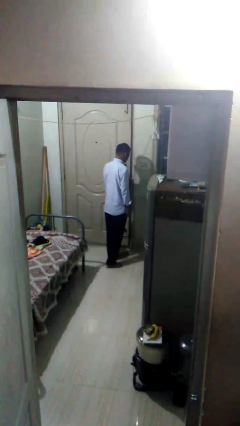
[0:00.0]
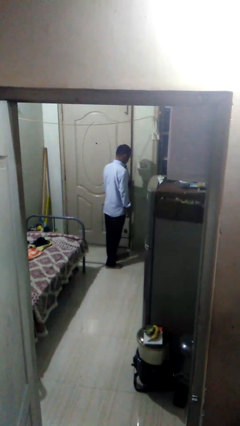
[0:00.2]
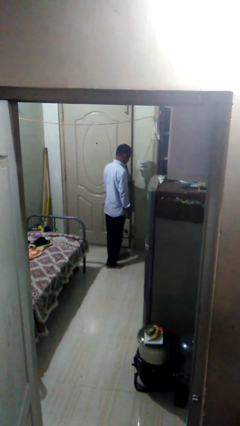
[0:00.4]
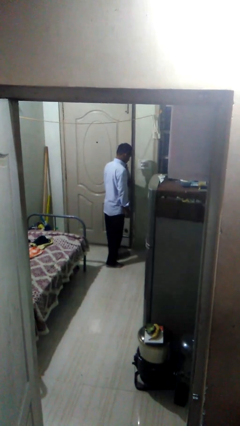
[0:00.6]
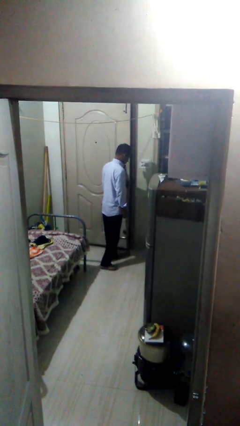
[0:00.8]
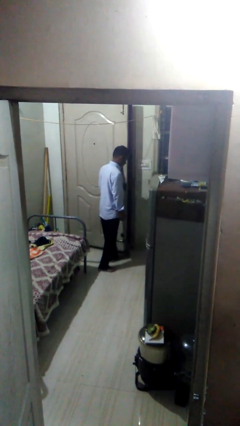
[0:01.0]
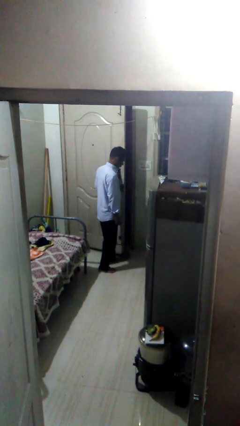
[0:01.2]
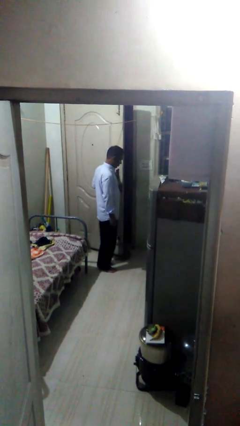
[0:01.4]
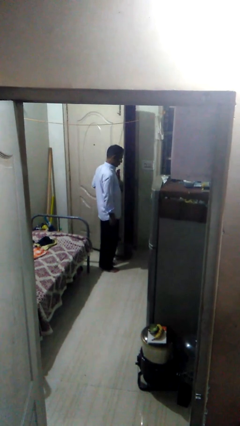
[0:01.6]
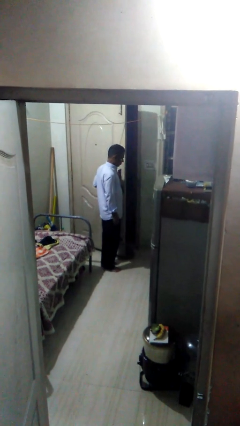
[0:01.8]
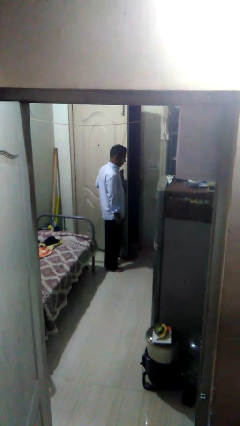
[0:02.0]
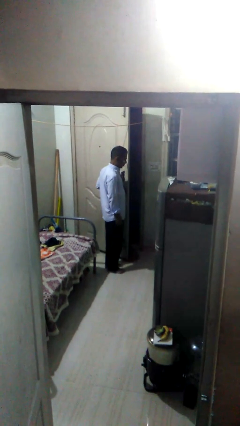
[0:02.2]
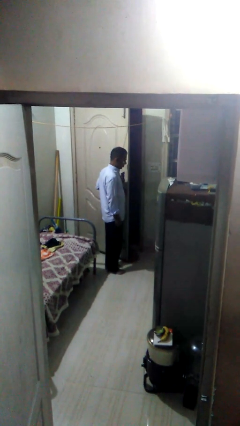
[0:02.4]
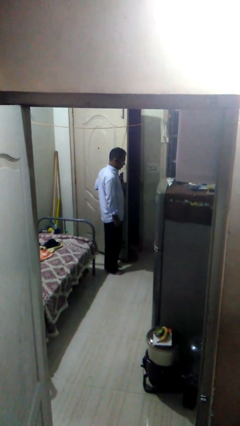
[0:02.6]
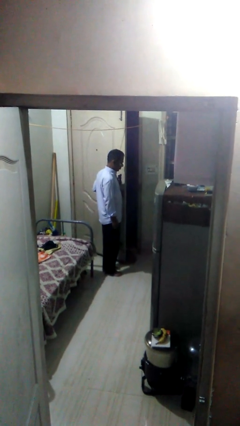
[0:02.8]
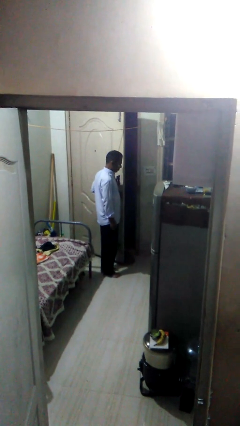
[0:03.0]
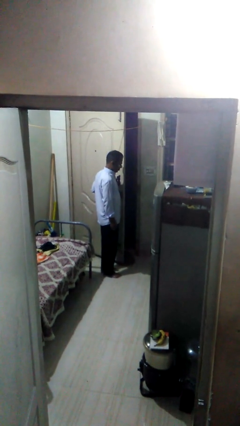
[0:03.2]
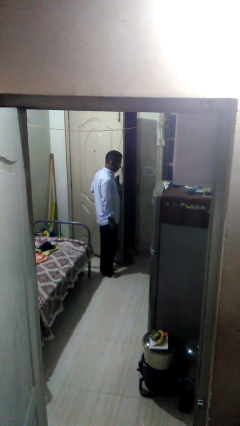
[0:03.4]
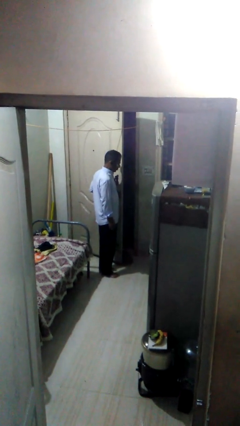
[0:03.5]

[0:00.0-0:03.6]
person opens facility door

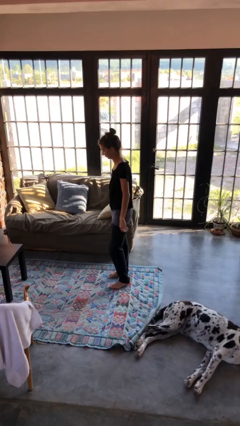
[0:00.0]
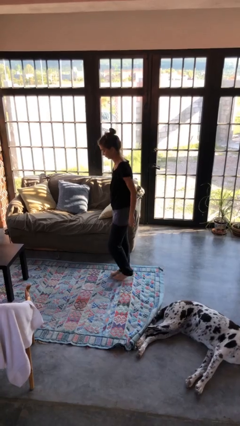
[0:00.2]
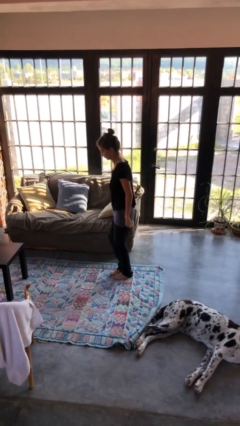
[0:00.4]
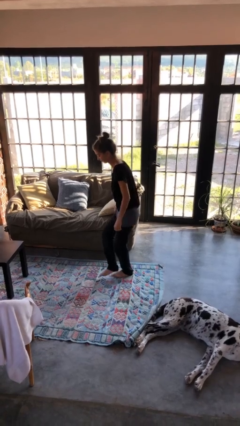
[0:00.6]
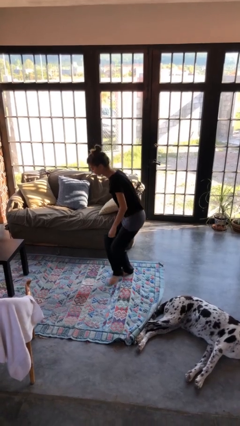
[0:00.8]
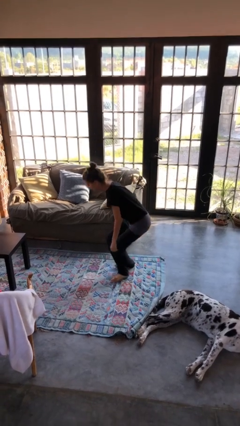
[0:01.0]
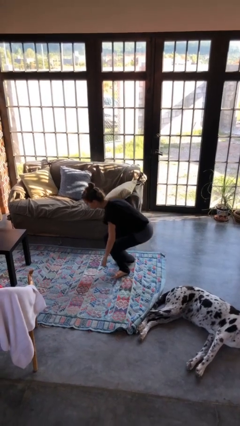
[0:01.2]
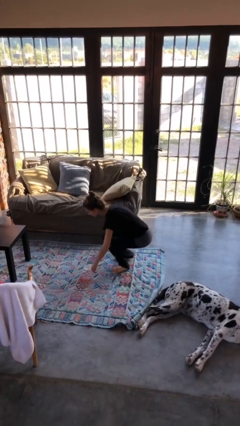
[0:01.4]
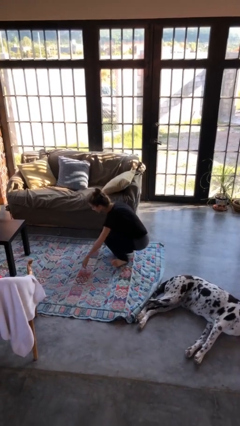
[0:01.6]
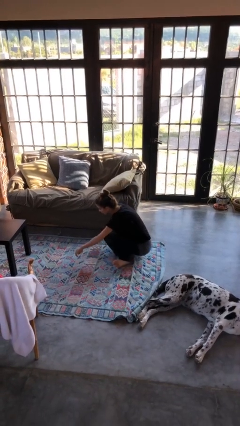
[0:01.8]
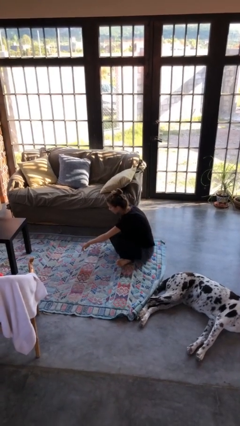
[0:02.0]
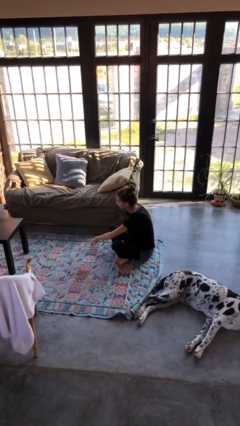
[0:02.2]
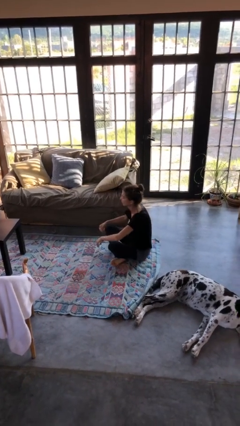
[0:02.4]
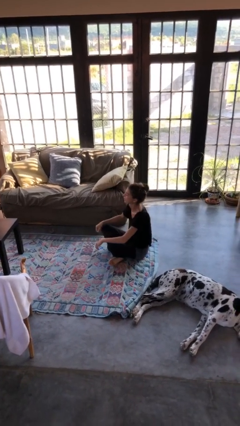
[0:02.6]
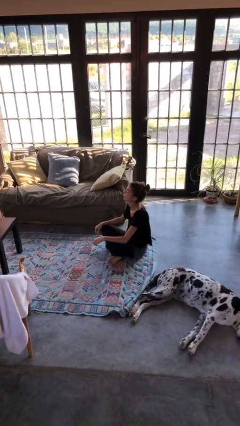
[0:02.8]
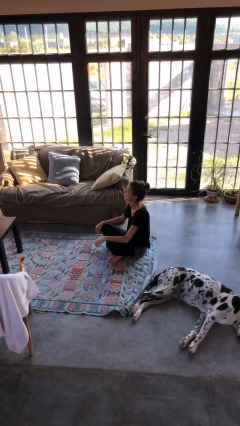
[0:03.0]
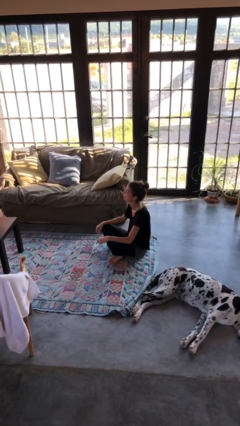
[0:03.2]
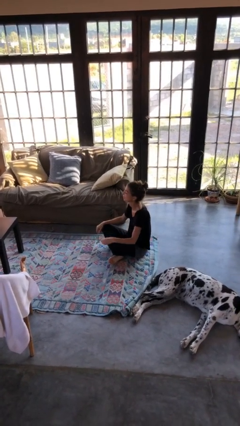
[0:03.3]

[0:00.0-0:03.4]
person sits crisscross

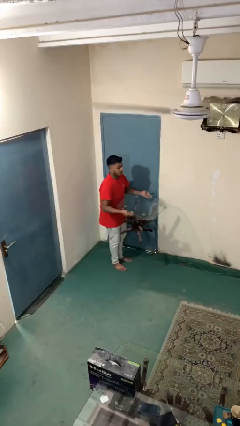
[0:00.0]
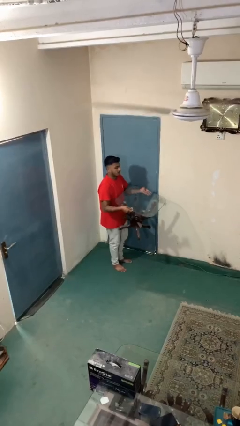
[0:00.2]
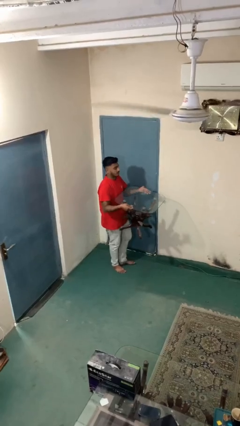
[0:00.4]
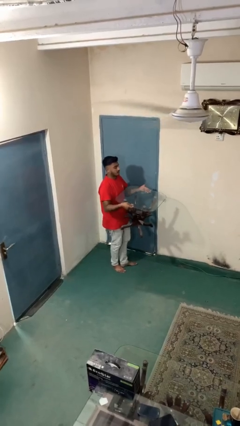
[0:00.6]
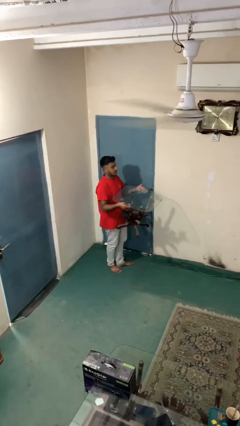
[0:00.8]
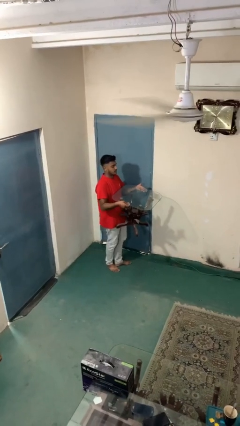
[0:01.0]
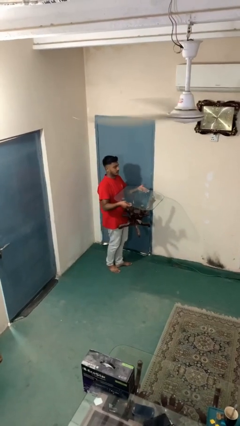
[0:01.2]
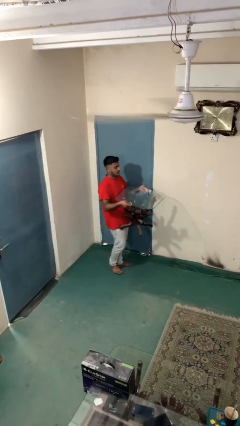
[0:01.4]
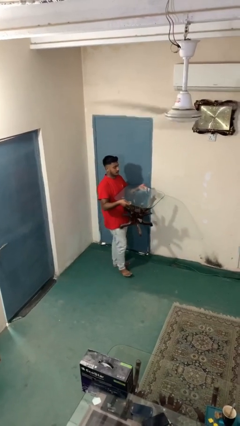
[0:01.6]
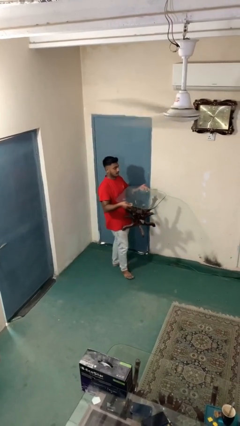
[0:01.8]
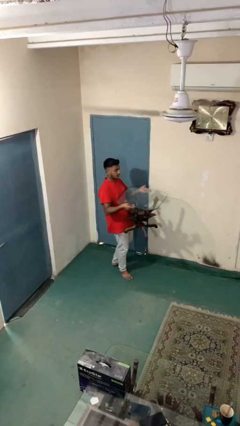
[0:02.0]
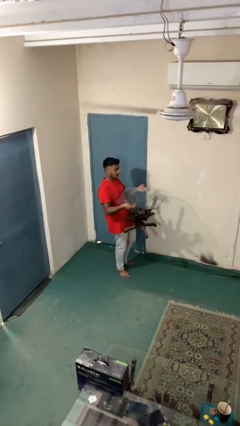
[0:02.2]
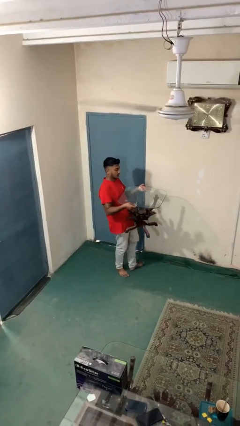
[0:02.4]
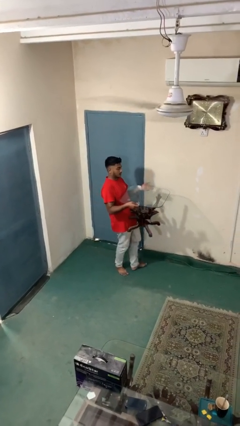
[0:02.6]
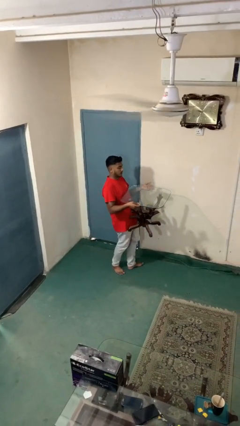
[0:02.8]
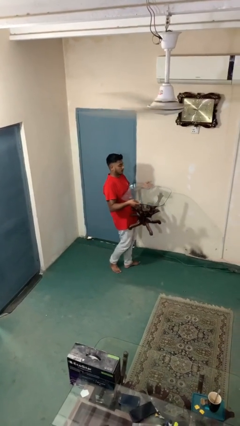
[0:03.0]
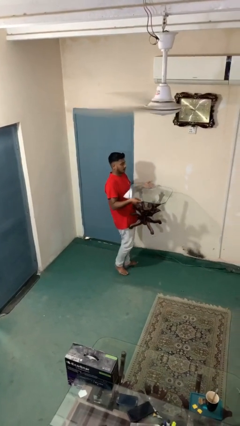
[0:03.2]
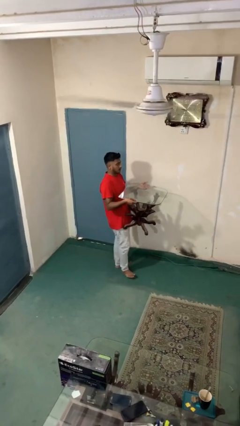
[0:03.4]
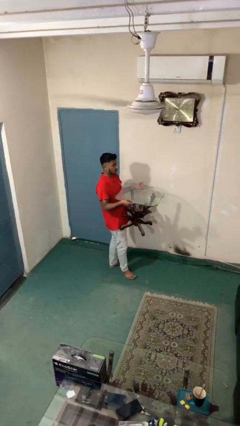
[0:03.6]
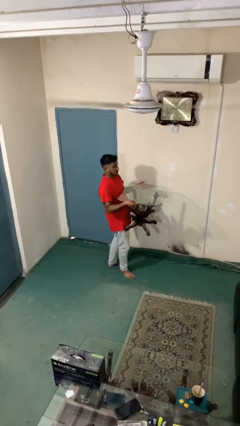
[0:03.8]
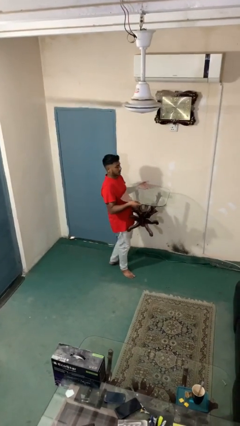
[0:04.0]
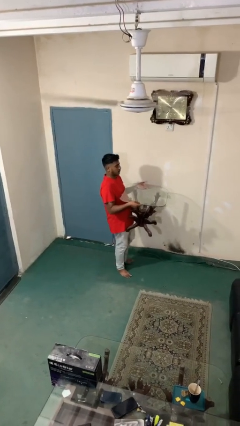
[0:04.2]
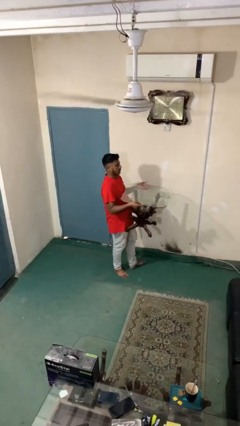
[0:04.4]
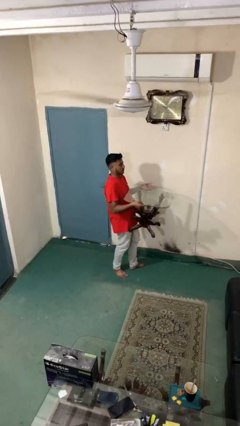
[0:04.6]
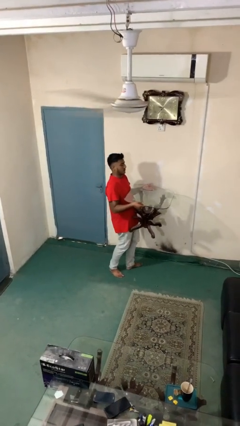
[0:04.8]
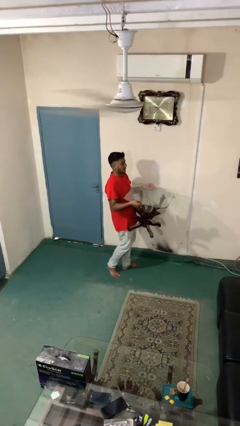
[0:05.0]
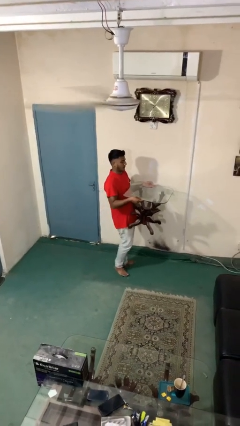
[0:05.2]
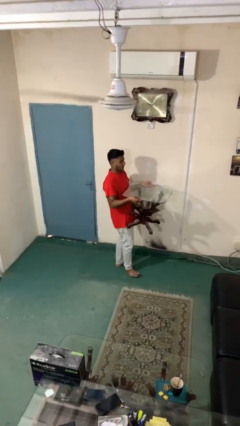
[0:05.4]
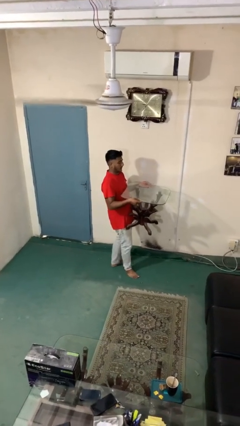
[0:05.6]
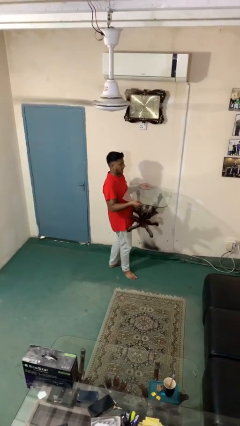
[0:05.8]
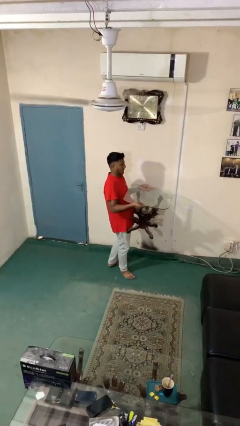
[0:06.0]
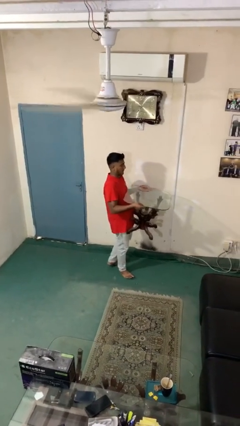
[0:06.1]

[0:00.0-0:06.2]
person carries heavy object

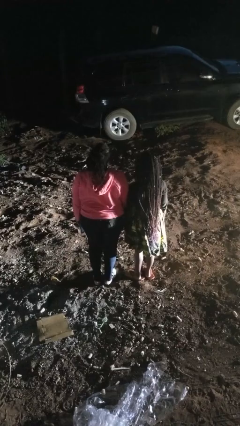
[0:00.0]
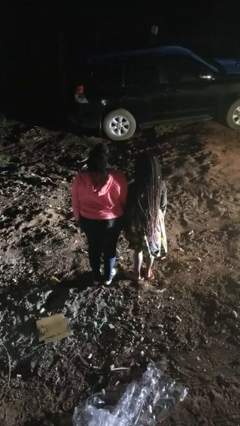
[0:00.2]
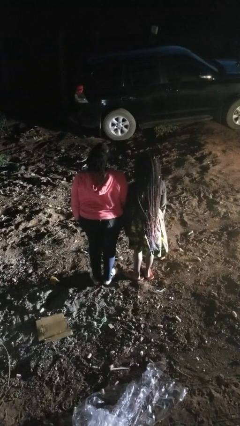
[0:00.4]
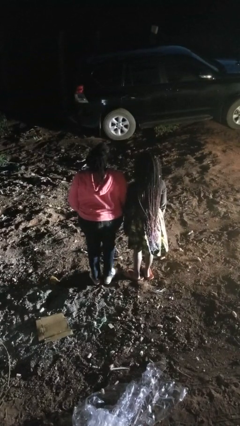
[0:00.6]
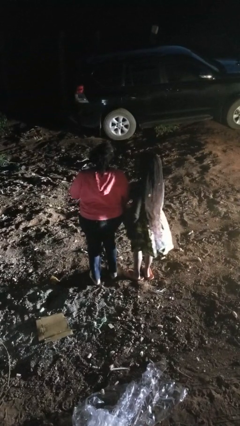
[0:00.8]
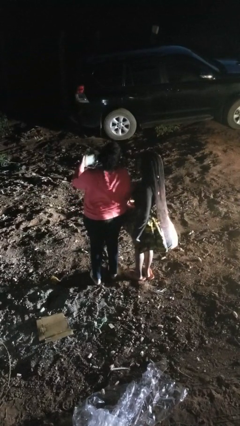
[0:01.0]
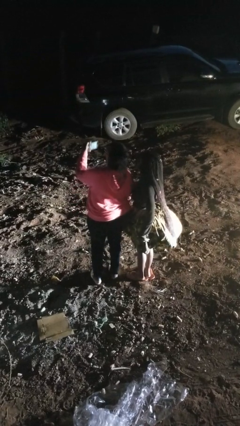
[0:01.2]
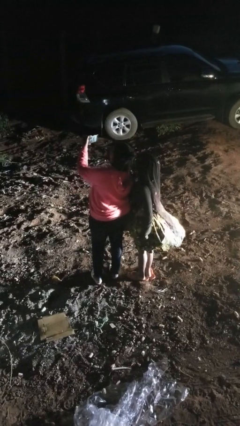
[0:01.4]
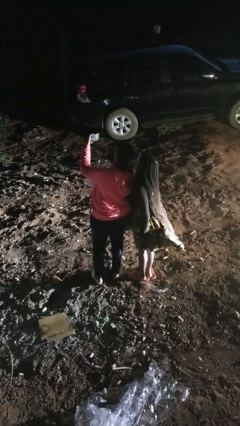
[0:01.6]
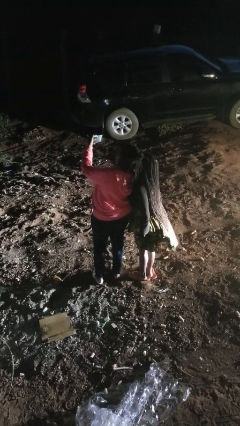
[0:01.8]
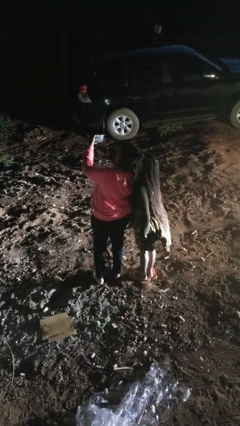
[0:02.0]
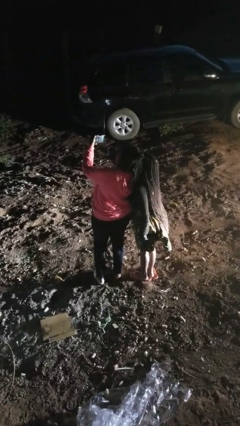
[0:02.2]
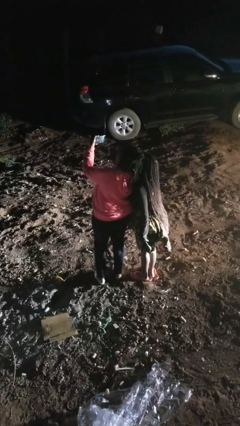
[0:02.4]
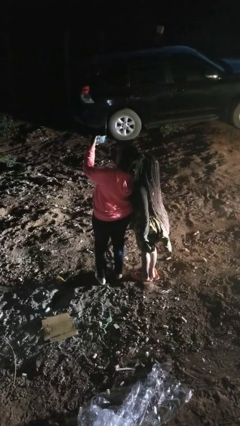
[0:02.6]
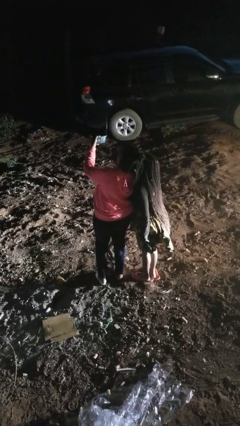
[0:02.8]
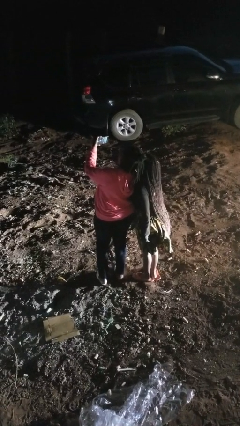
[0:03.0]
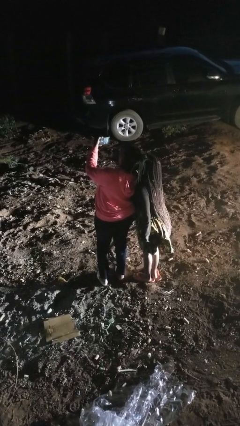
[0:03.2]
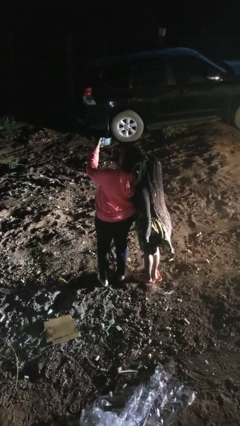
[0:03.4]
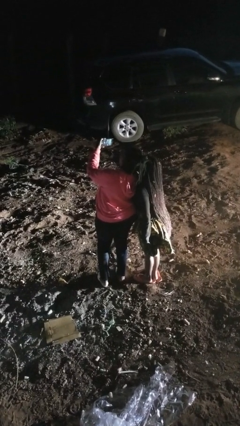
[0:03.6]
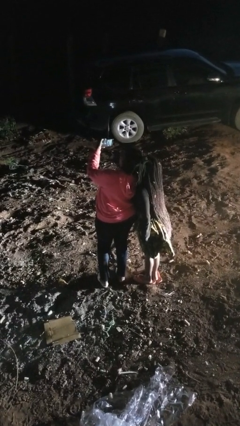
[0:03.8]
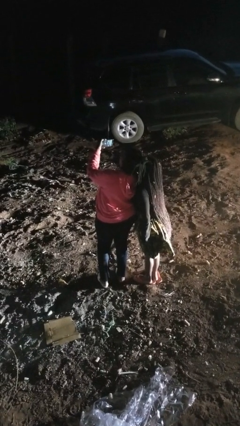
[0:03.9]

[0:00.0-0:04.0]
person takes selfie with person

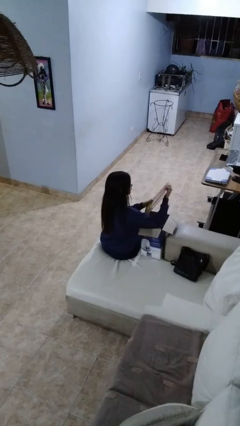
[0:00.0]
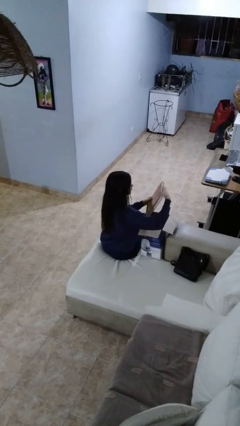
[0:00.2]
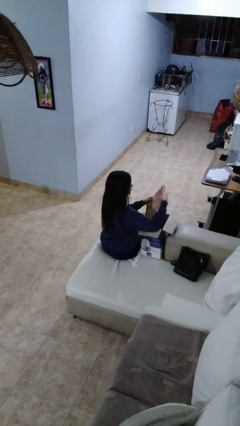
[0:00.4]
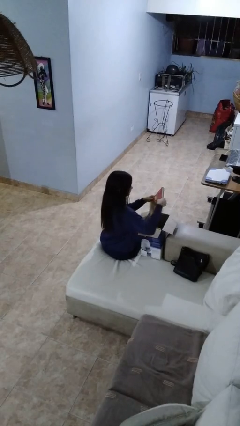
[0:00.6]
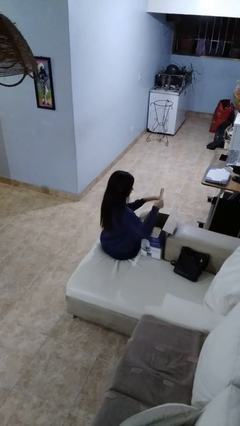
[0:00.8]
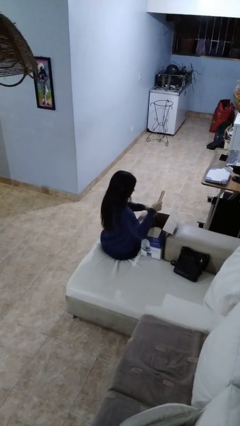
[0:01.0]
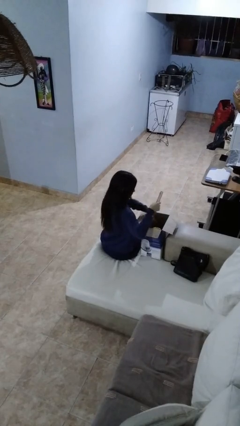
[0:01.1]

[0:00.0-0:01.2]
person puts object into box
